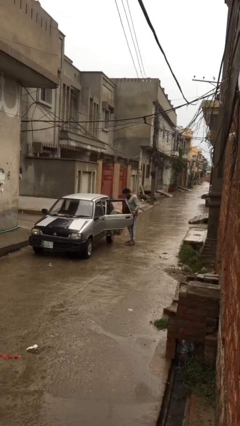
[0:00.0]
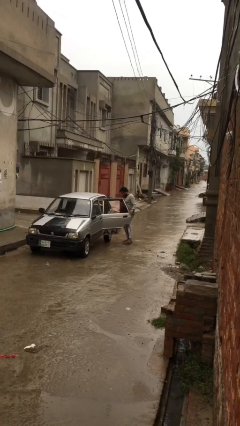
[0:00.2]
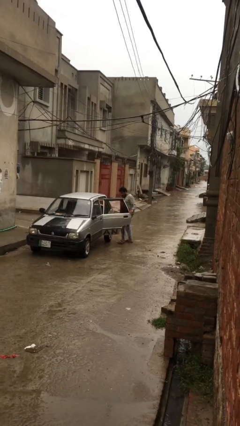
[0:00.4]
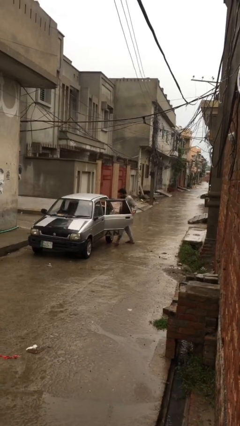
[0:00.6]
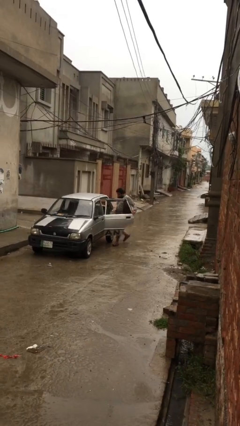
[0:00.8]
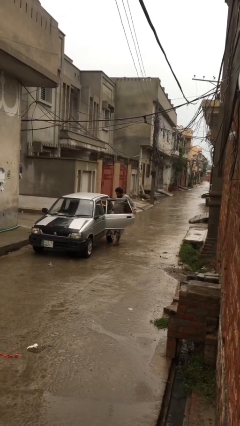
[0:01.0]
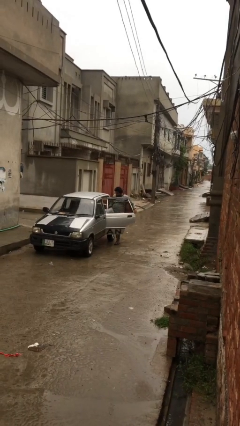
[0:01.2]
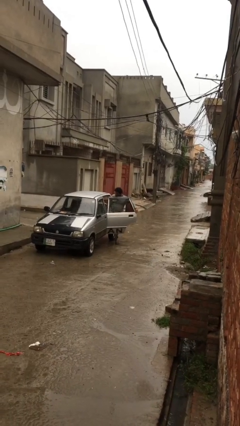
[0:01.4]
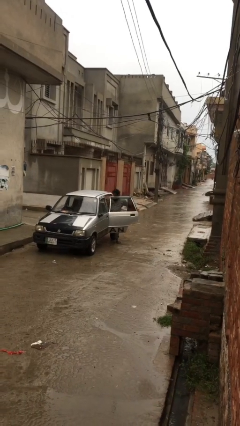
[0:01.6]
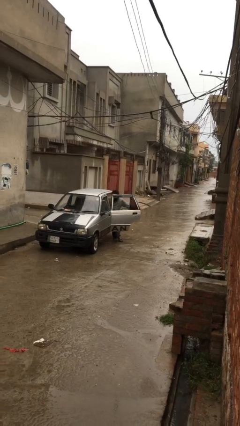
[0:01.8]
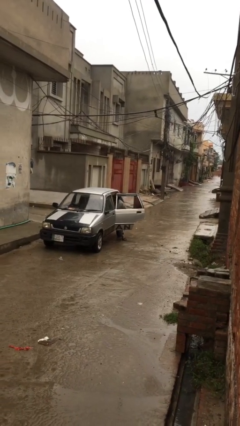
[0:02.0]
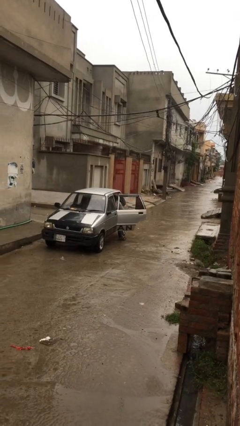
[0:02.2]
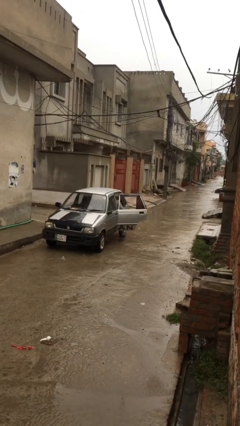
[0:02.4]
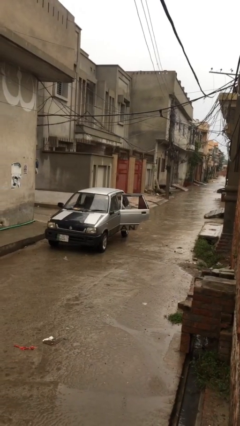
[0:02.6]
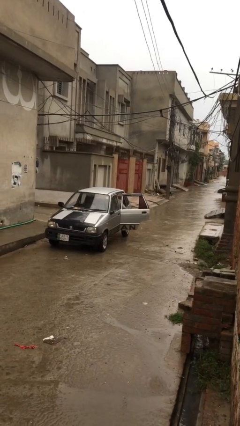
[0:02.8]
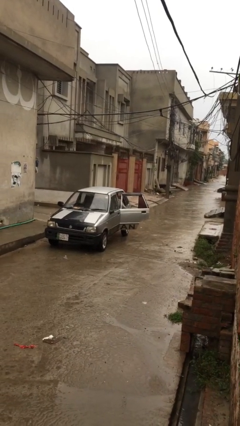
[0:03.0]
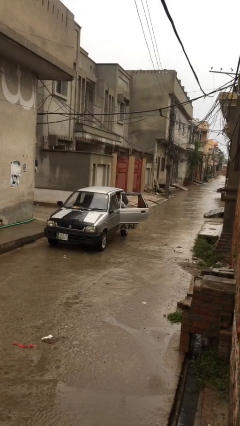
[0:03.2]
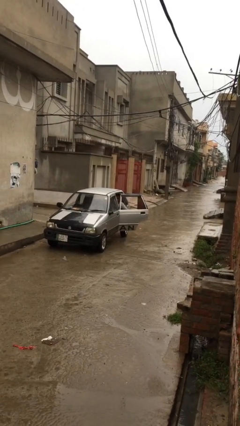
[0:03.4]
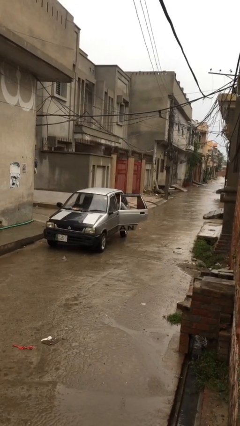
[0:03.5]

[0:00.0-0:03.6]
person enters car

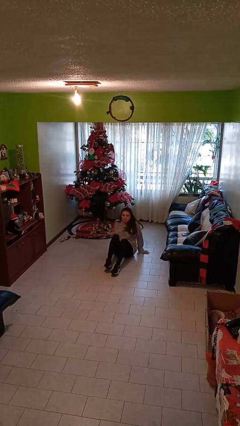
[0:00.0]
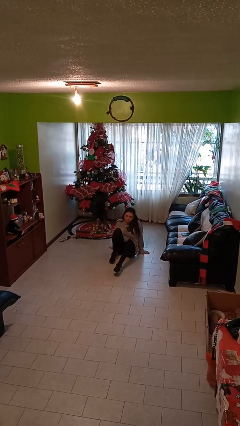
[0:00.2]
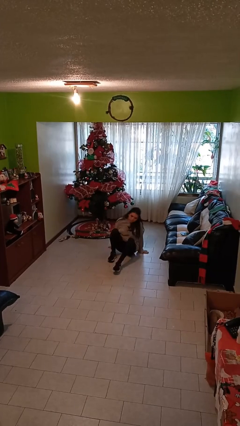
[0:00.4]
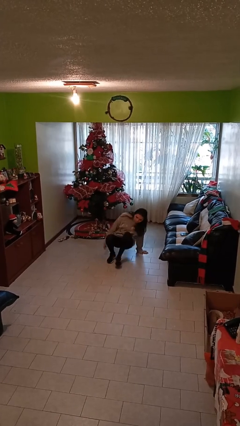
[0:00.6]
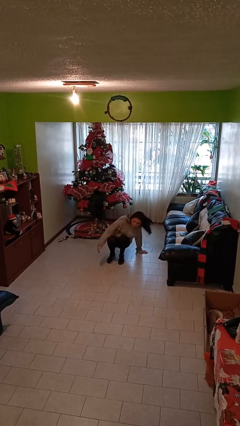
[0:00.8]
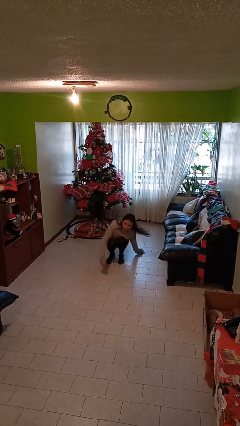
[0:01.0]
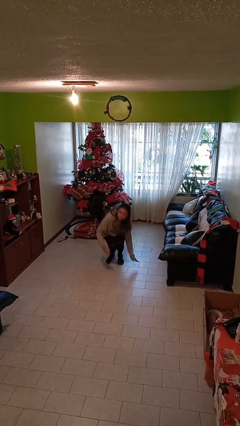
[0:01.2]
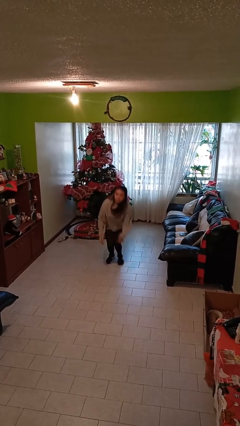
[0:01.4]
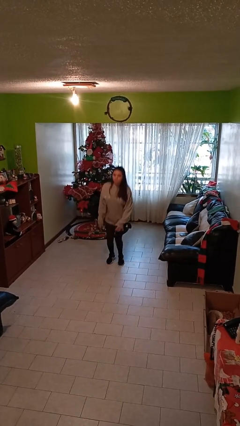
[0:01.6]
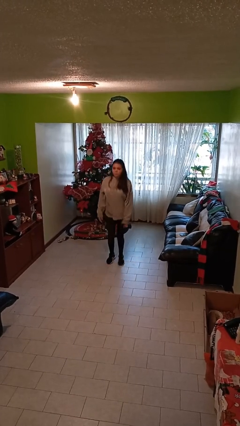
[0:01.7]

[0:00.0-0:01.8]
person stands up

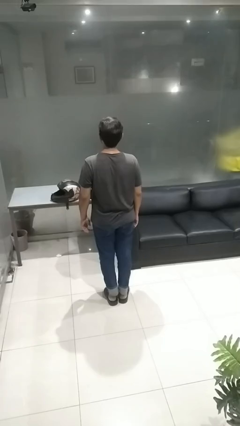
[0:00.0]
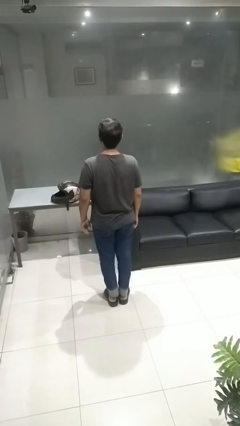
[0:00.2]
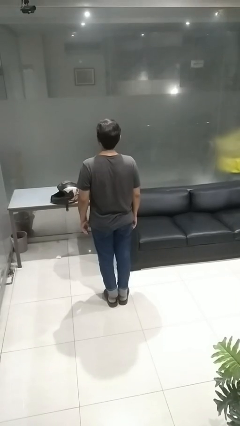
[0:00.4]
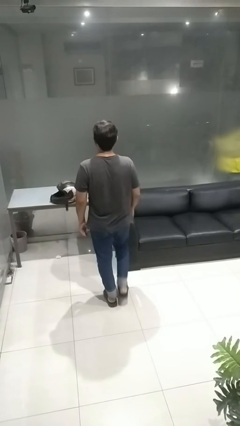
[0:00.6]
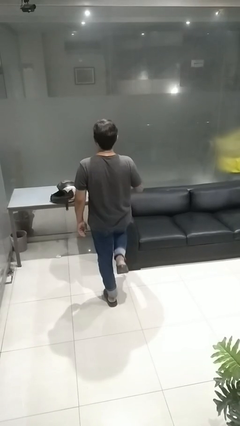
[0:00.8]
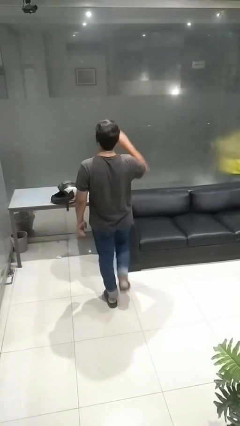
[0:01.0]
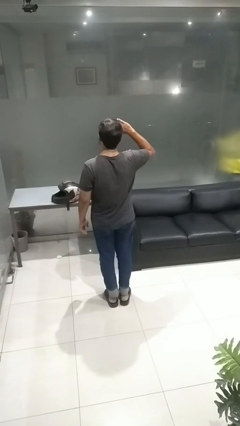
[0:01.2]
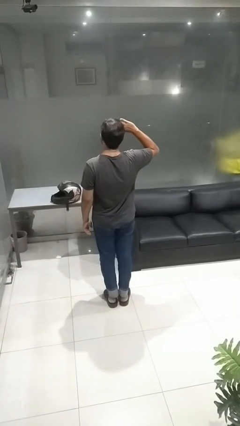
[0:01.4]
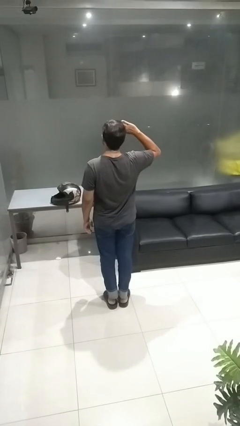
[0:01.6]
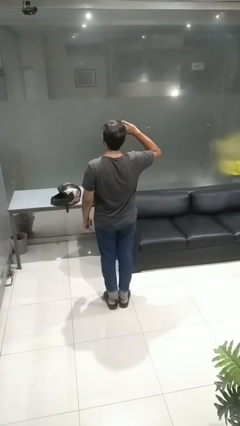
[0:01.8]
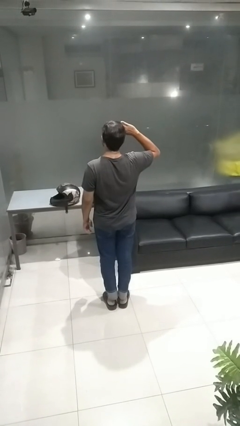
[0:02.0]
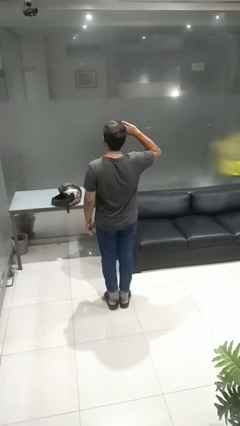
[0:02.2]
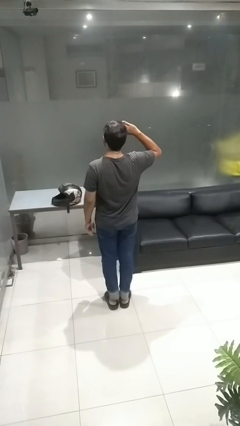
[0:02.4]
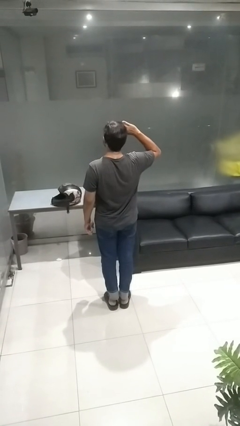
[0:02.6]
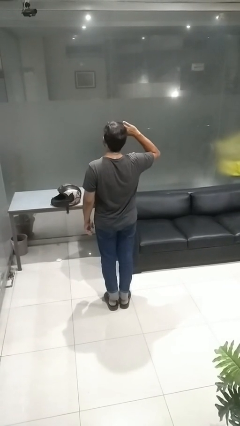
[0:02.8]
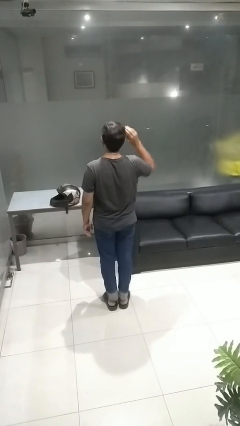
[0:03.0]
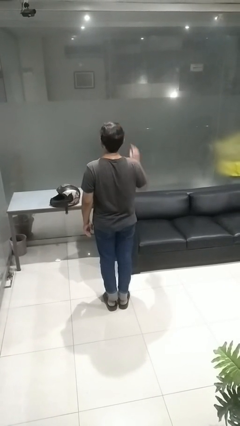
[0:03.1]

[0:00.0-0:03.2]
person salutes

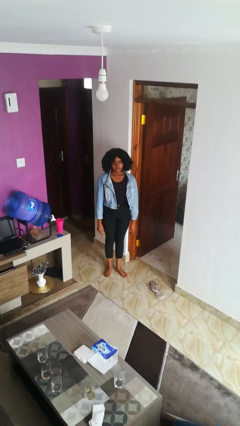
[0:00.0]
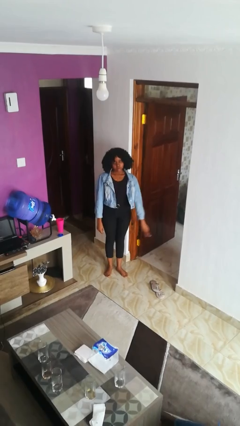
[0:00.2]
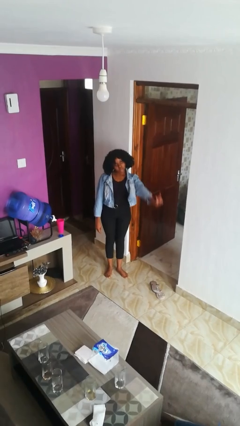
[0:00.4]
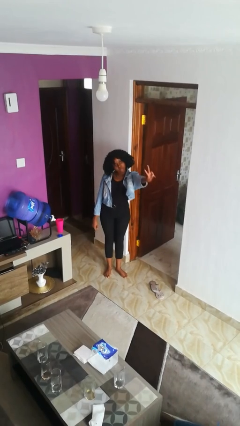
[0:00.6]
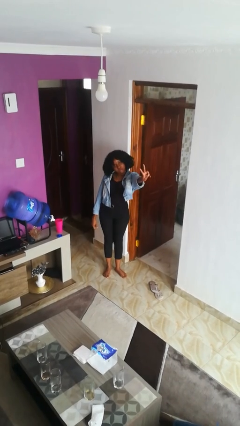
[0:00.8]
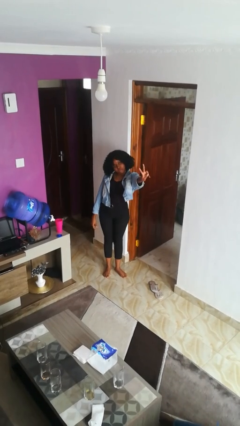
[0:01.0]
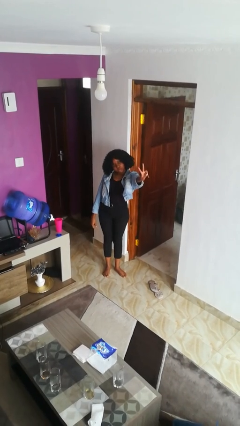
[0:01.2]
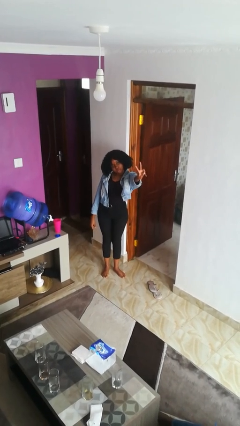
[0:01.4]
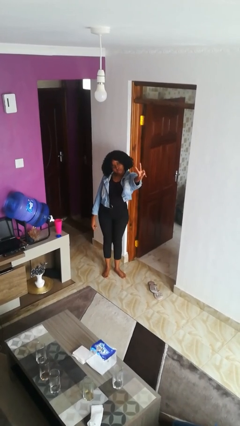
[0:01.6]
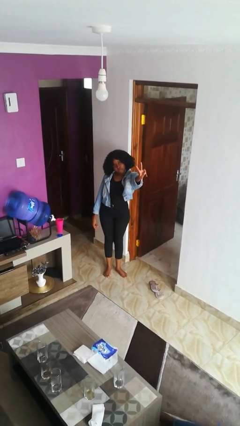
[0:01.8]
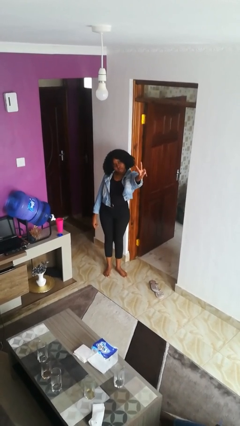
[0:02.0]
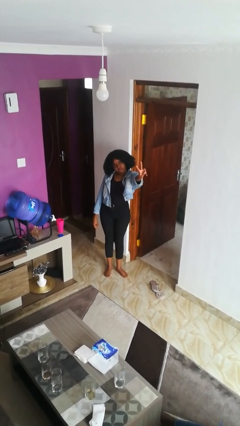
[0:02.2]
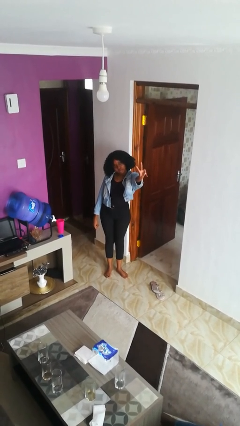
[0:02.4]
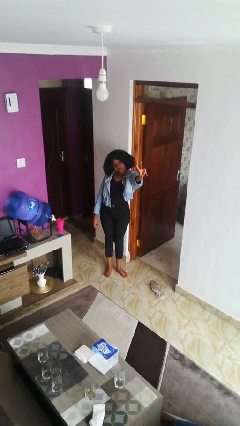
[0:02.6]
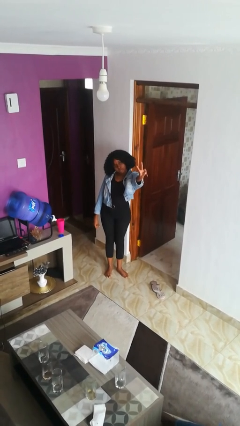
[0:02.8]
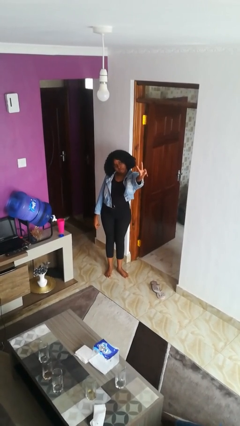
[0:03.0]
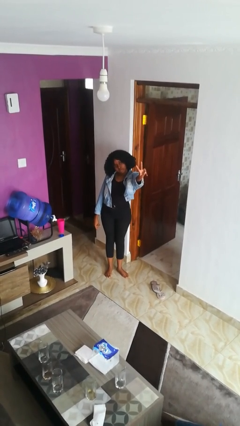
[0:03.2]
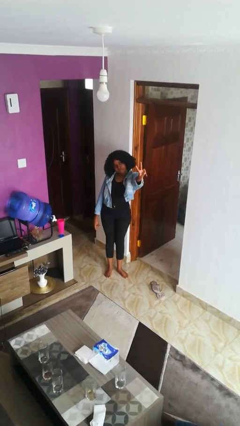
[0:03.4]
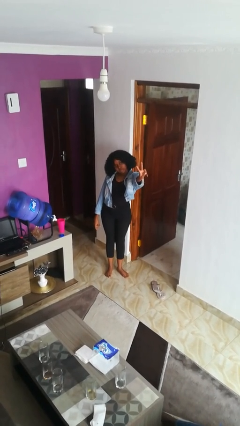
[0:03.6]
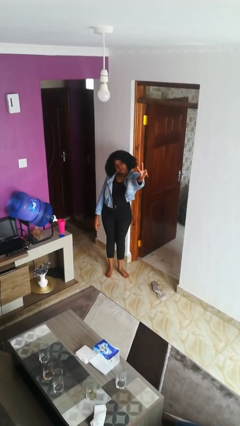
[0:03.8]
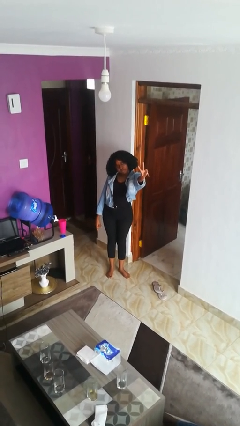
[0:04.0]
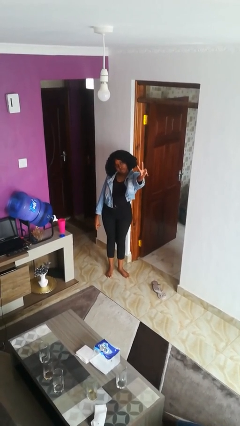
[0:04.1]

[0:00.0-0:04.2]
person gestures peace

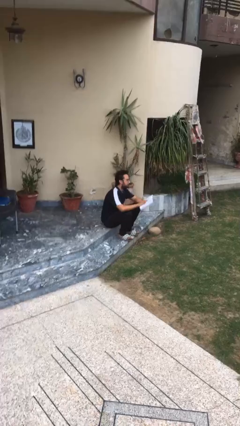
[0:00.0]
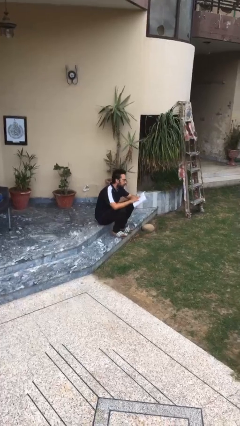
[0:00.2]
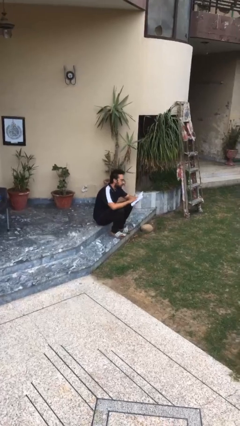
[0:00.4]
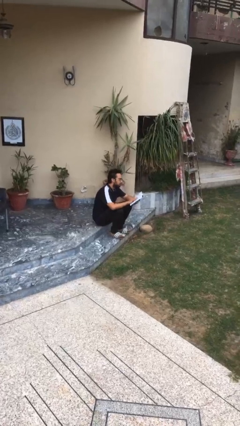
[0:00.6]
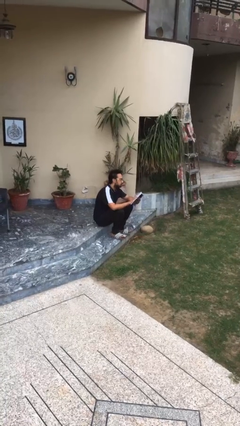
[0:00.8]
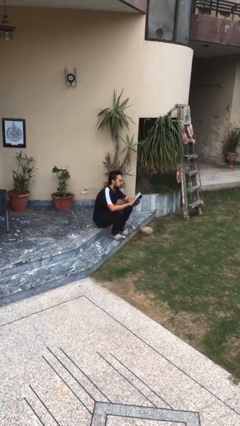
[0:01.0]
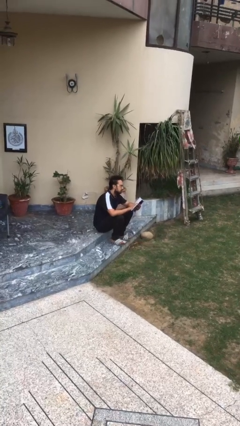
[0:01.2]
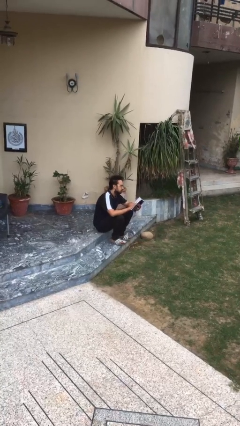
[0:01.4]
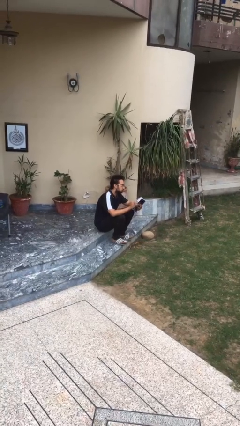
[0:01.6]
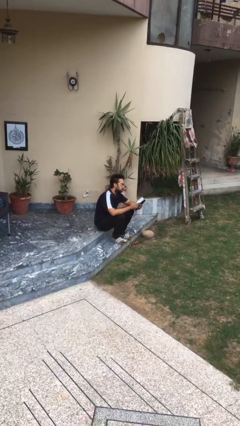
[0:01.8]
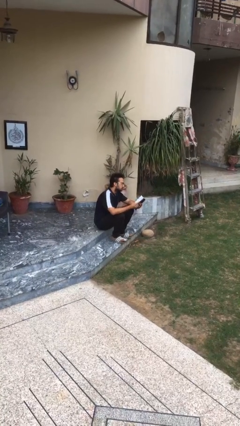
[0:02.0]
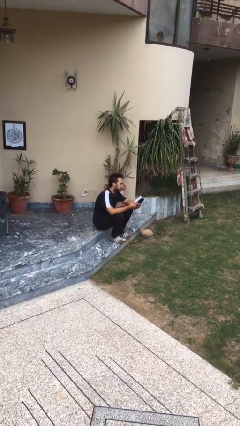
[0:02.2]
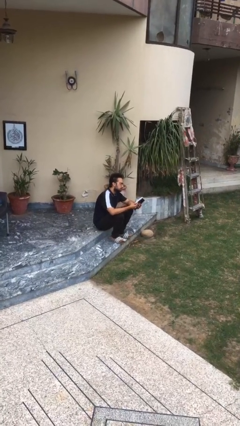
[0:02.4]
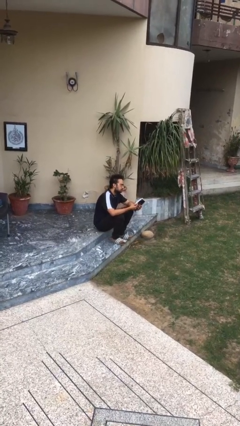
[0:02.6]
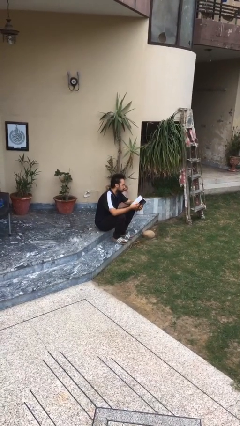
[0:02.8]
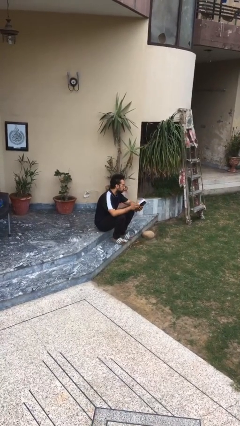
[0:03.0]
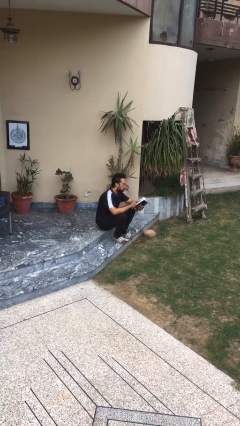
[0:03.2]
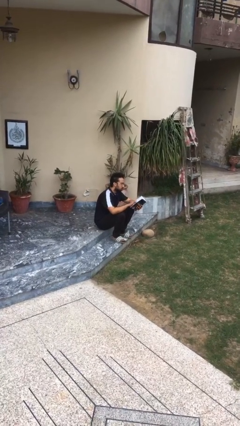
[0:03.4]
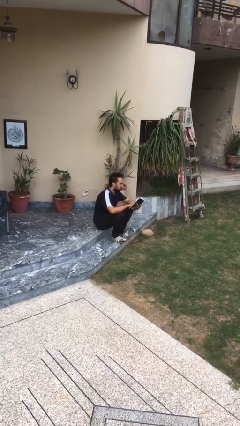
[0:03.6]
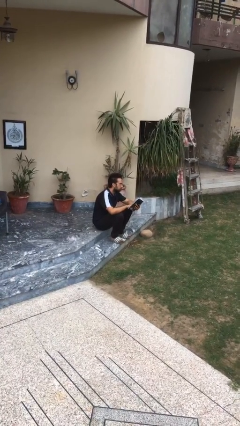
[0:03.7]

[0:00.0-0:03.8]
person reads document

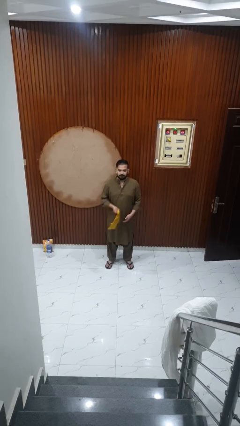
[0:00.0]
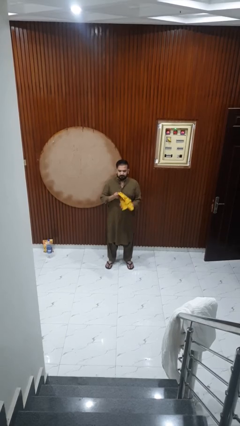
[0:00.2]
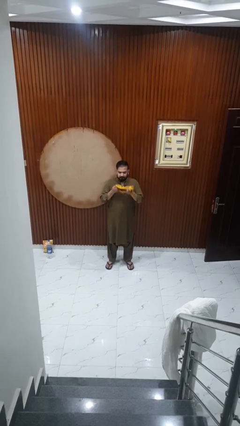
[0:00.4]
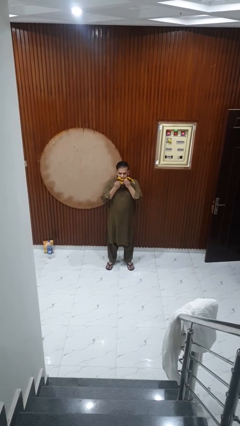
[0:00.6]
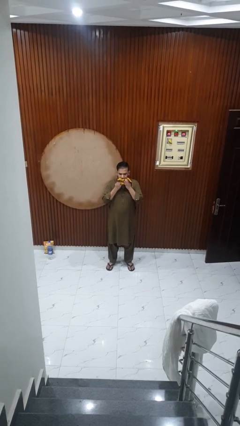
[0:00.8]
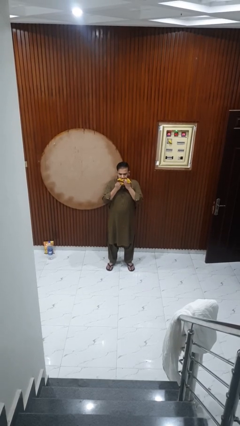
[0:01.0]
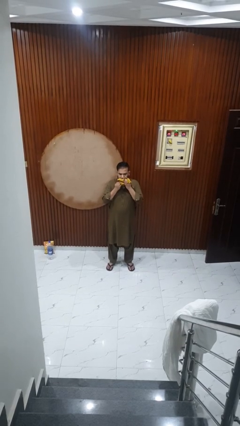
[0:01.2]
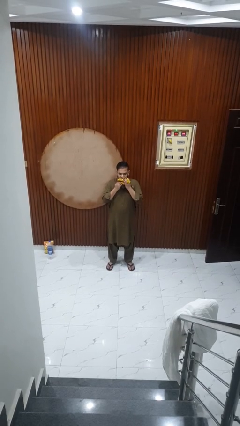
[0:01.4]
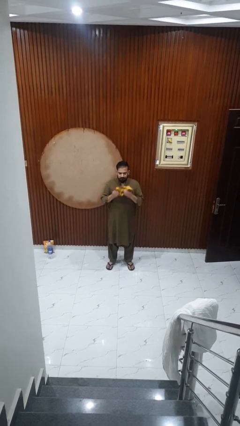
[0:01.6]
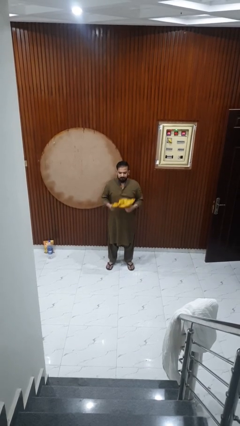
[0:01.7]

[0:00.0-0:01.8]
person wipes mouth with napkin
